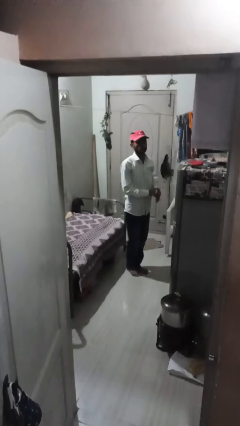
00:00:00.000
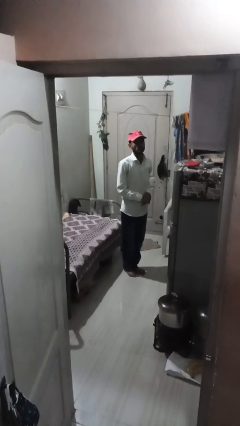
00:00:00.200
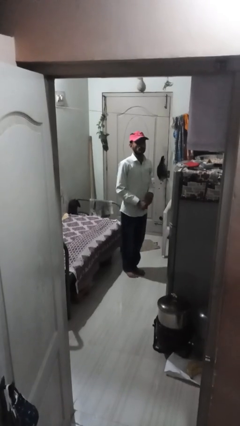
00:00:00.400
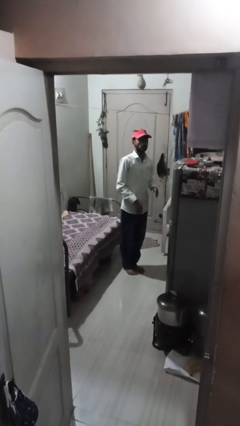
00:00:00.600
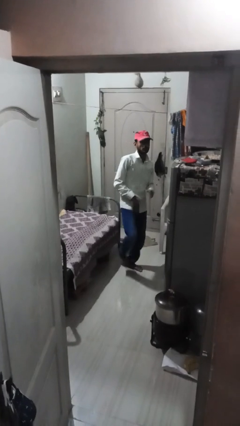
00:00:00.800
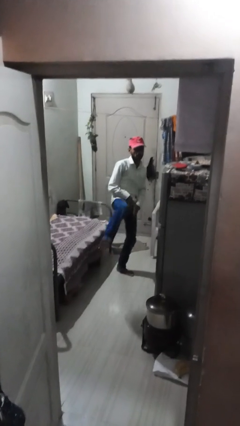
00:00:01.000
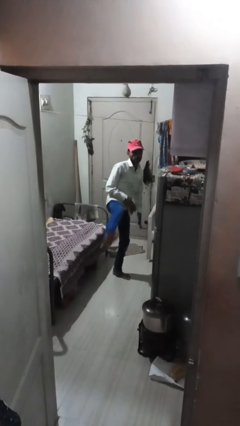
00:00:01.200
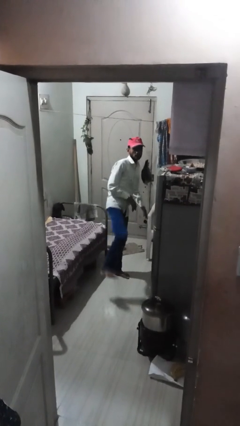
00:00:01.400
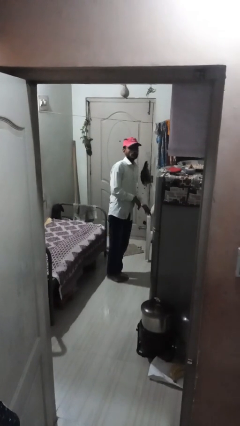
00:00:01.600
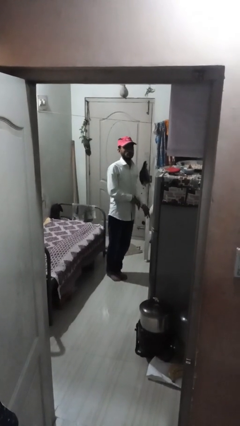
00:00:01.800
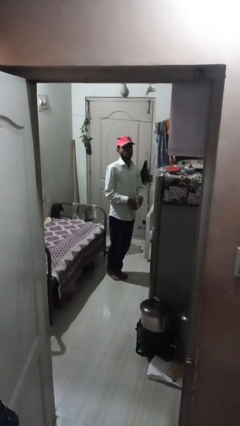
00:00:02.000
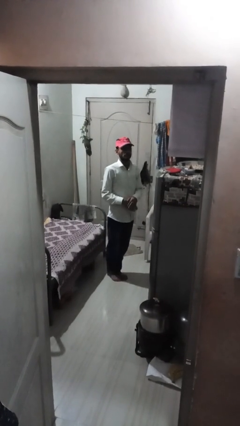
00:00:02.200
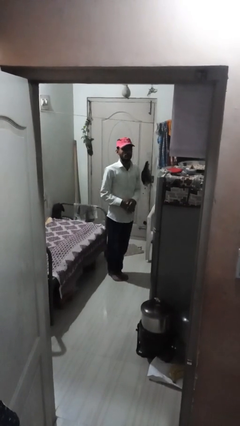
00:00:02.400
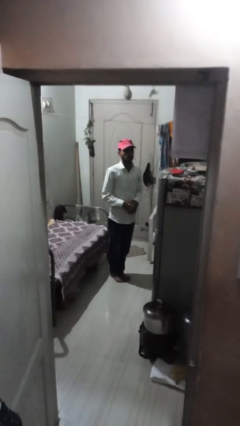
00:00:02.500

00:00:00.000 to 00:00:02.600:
person karate kicks

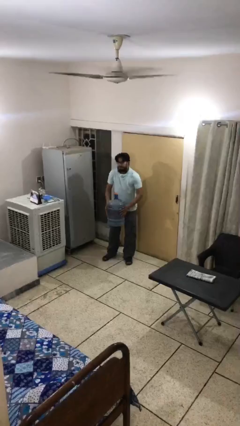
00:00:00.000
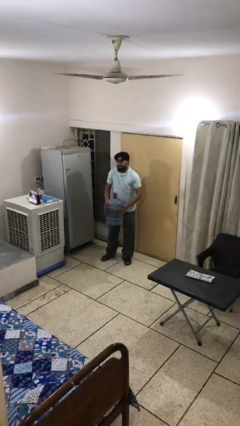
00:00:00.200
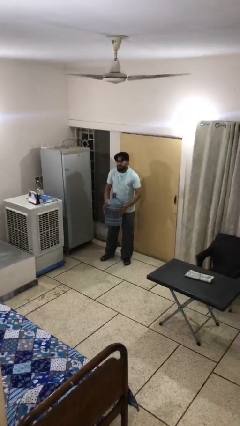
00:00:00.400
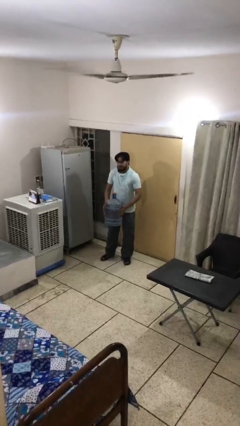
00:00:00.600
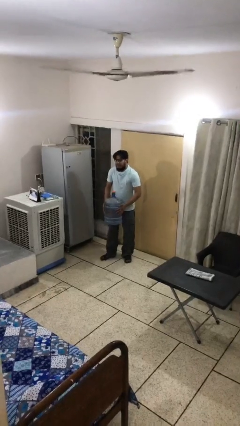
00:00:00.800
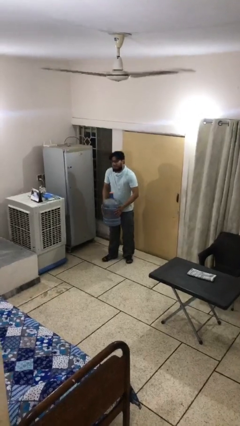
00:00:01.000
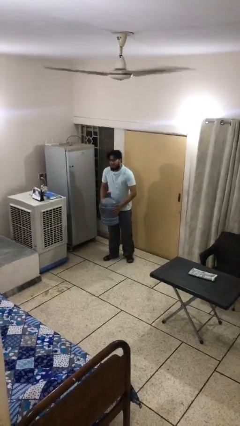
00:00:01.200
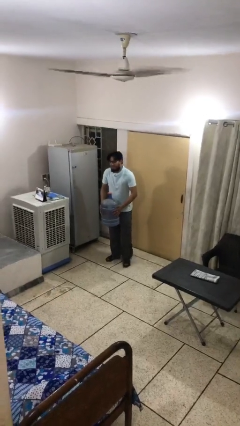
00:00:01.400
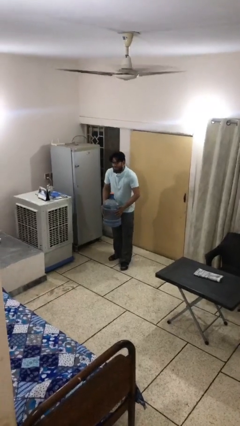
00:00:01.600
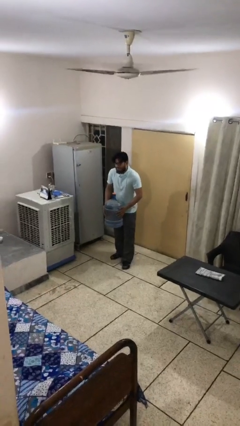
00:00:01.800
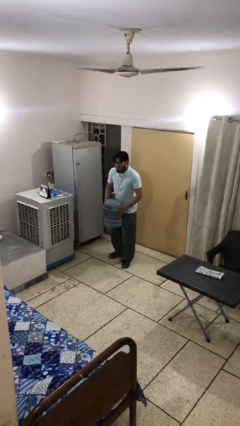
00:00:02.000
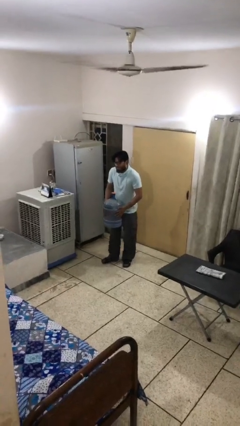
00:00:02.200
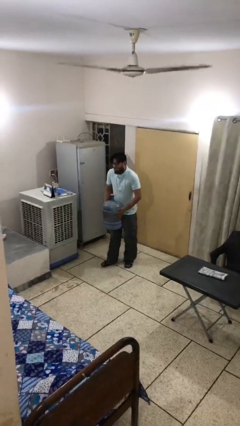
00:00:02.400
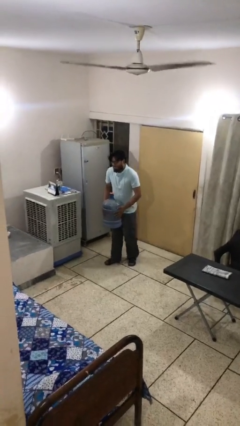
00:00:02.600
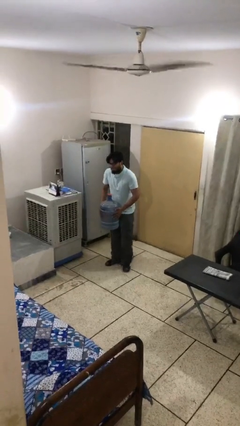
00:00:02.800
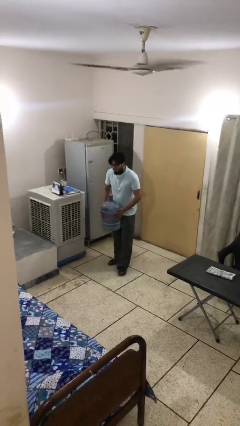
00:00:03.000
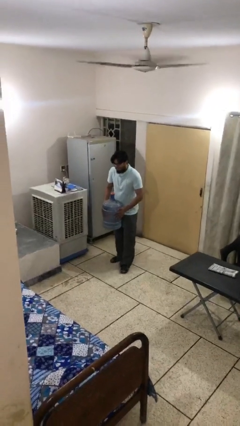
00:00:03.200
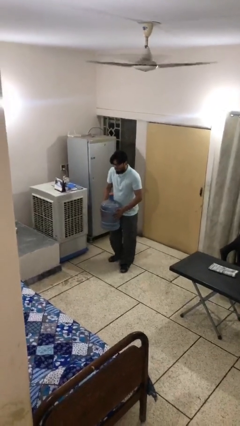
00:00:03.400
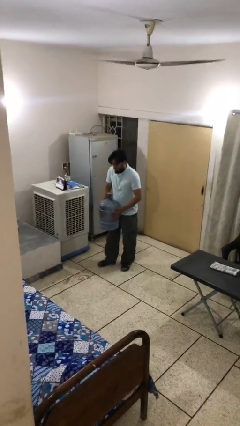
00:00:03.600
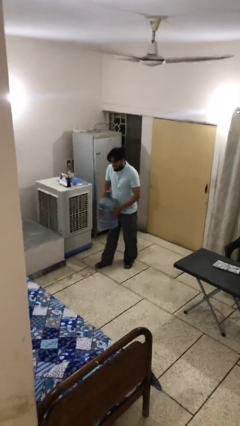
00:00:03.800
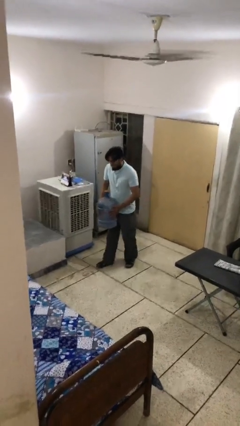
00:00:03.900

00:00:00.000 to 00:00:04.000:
person carries heavy object

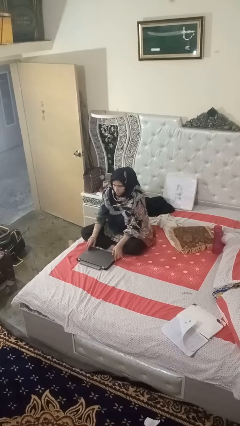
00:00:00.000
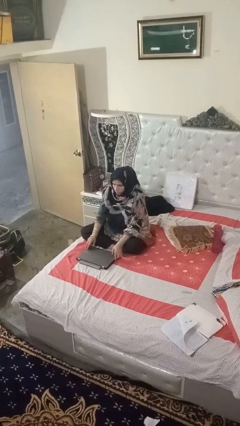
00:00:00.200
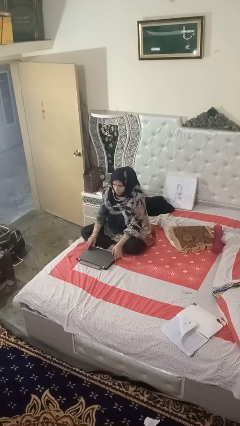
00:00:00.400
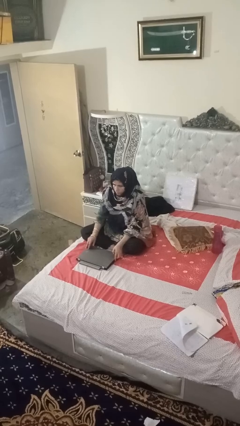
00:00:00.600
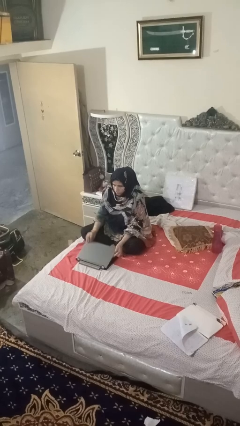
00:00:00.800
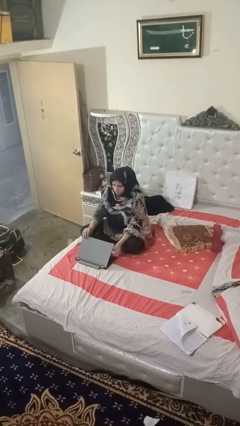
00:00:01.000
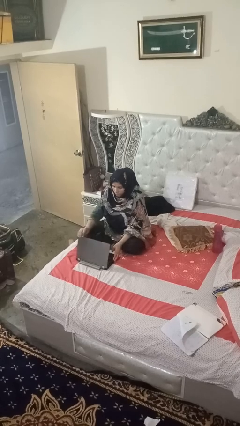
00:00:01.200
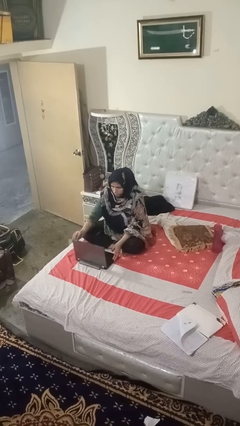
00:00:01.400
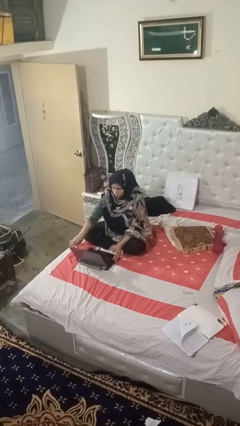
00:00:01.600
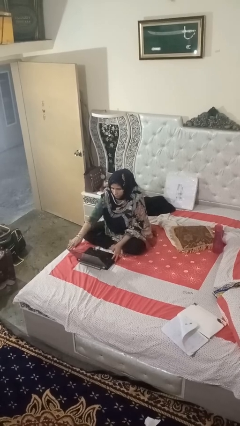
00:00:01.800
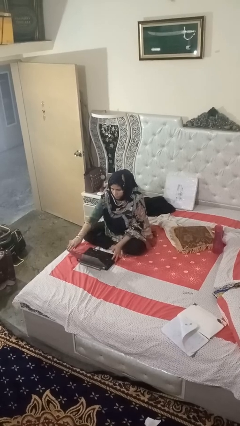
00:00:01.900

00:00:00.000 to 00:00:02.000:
person opens laptop

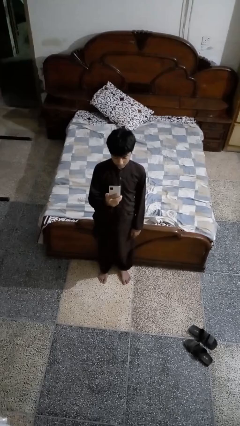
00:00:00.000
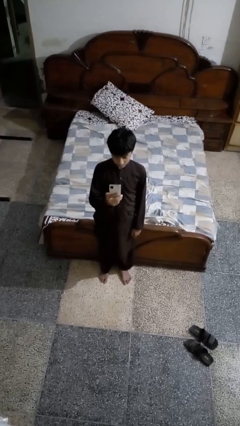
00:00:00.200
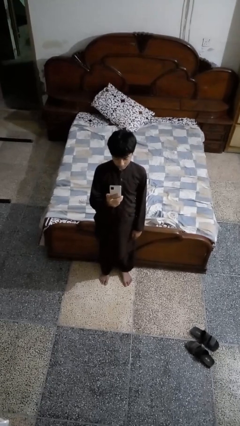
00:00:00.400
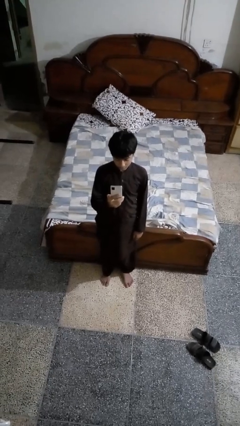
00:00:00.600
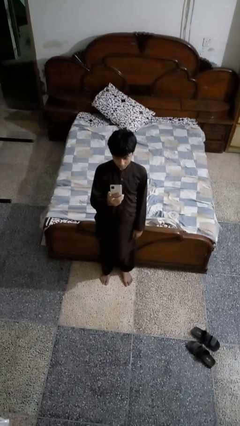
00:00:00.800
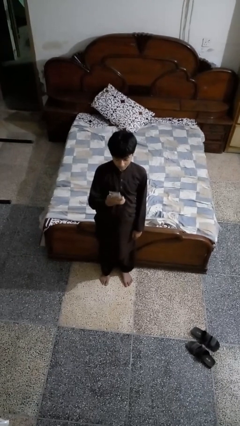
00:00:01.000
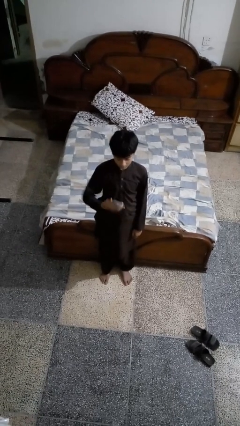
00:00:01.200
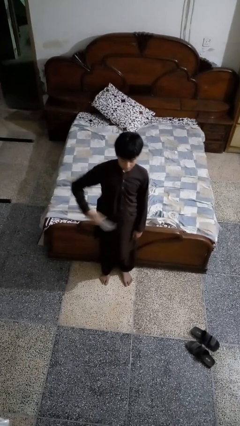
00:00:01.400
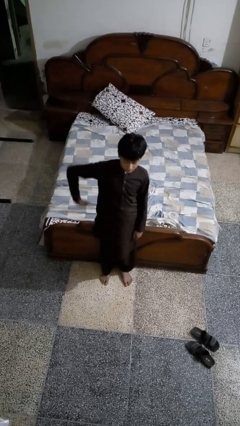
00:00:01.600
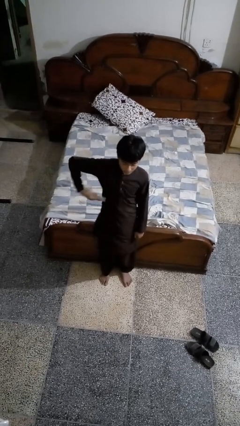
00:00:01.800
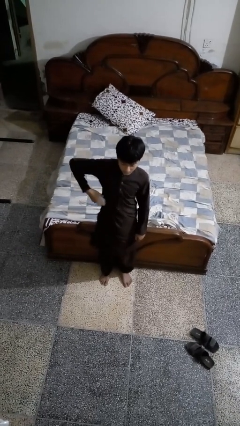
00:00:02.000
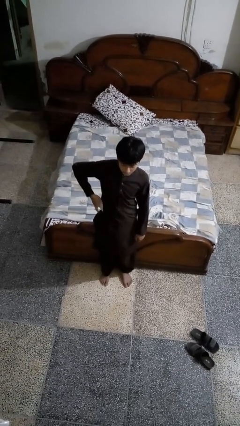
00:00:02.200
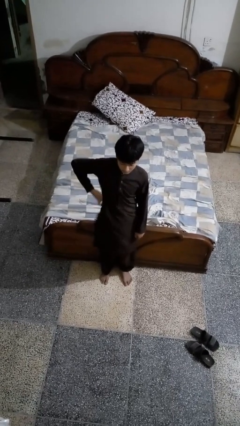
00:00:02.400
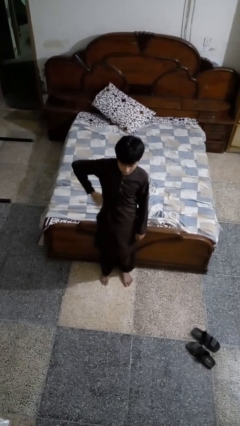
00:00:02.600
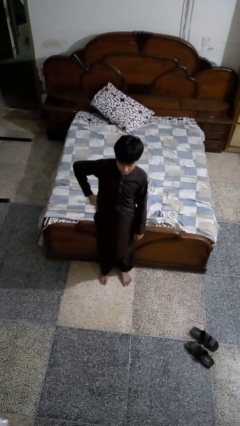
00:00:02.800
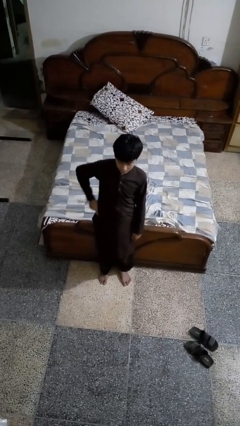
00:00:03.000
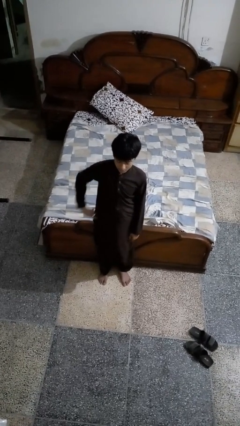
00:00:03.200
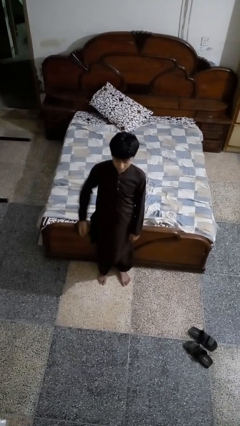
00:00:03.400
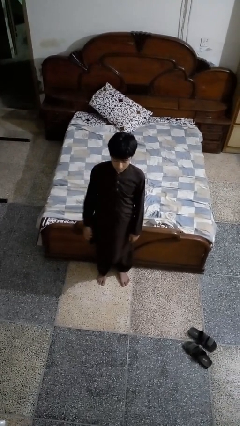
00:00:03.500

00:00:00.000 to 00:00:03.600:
person puts phone into pocket

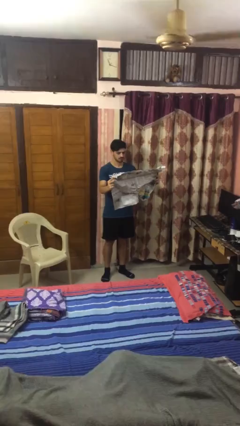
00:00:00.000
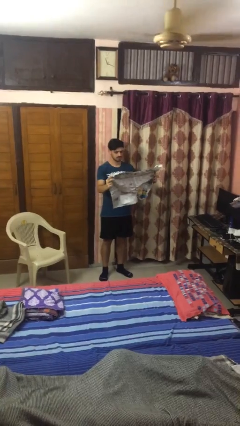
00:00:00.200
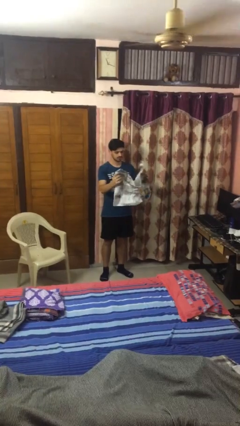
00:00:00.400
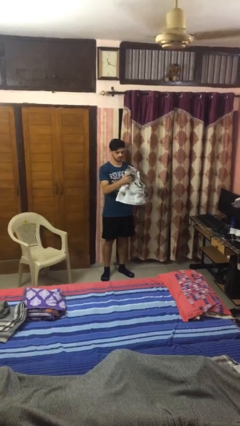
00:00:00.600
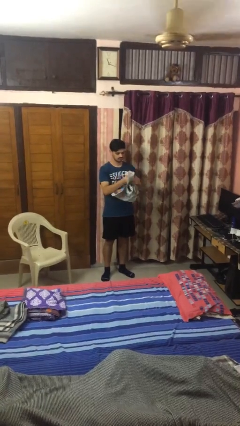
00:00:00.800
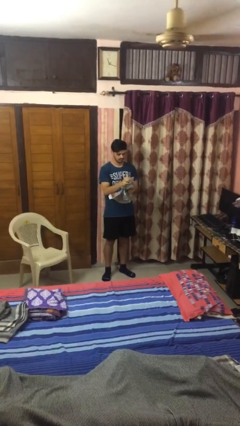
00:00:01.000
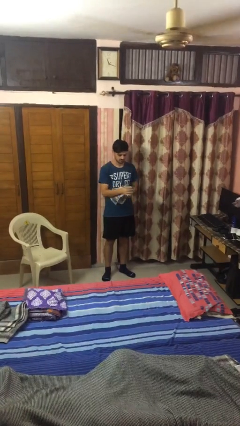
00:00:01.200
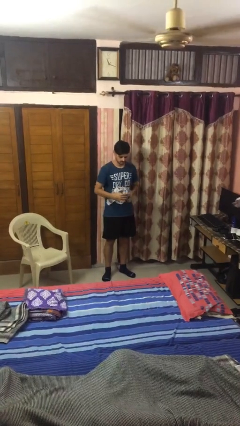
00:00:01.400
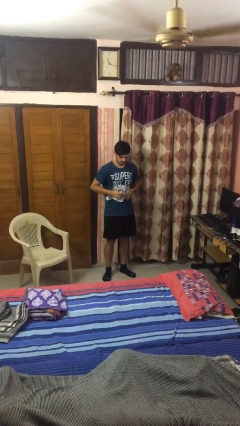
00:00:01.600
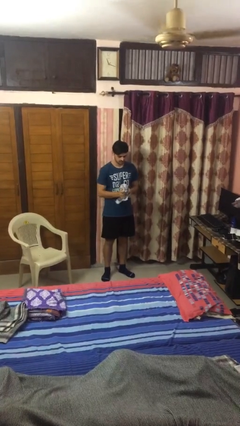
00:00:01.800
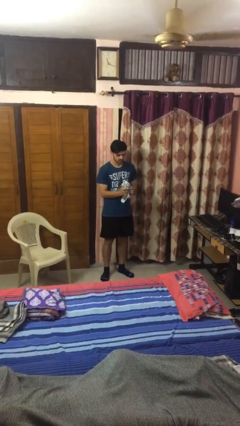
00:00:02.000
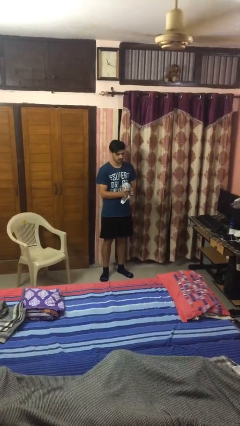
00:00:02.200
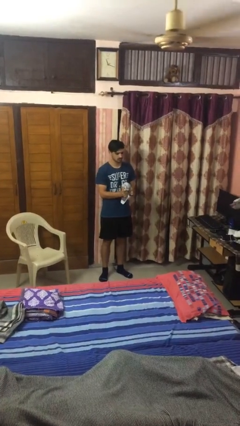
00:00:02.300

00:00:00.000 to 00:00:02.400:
person crumples paper

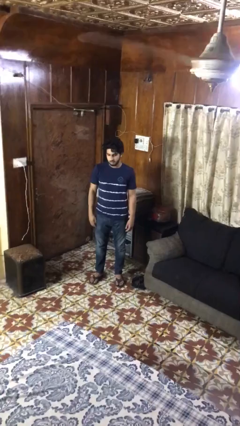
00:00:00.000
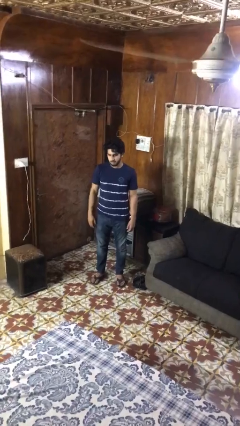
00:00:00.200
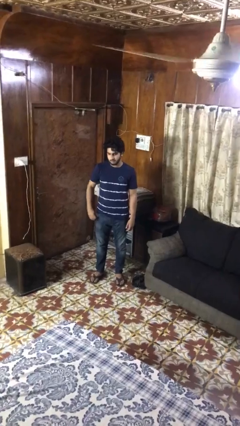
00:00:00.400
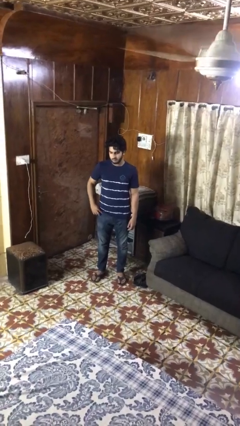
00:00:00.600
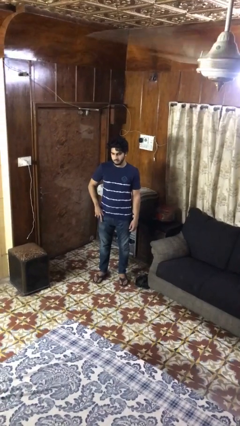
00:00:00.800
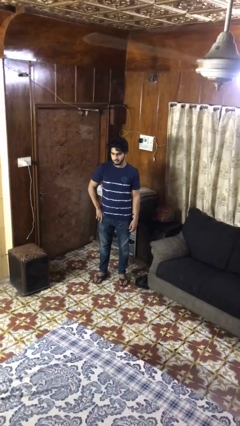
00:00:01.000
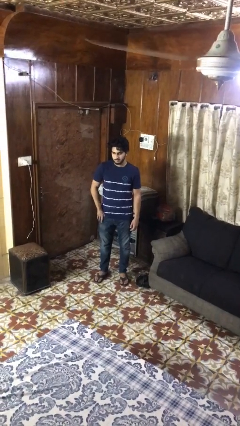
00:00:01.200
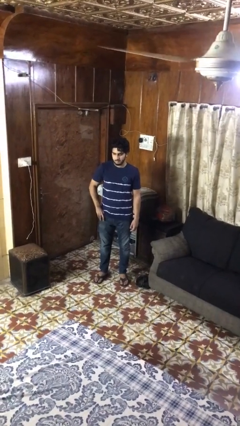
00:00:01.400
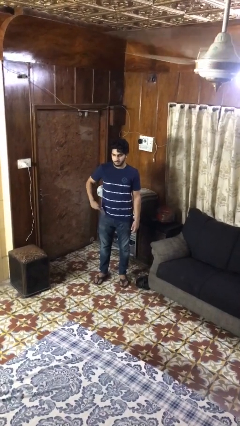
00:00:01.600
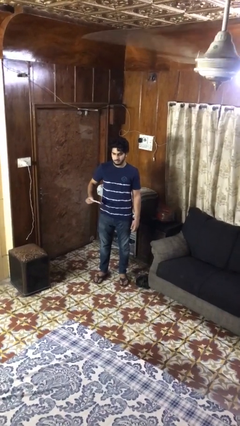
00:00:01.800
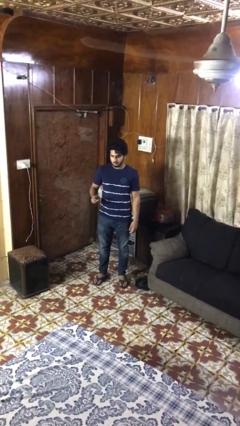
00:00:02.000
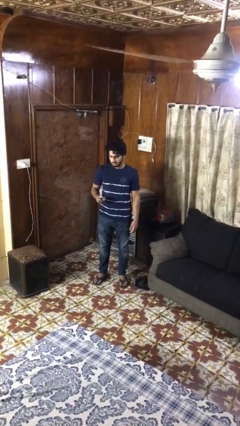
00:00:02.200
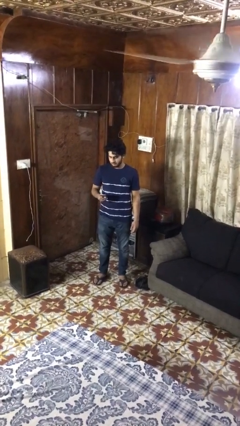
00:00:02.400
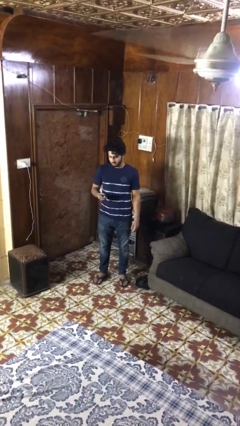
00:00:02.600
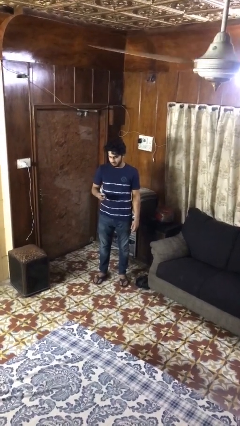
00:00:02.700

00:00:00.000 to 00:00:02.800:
person takes phone from pocket
